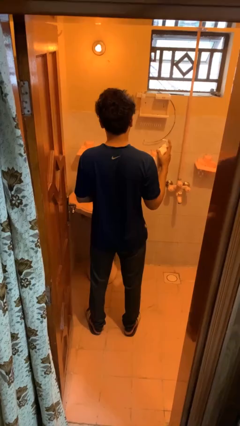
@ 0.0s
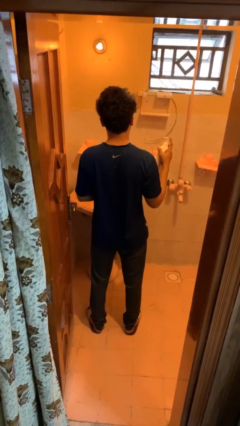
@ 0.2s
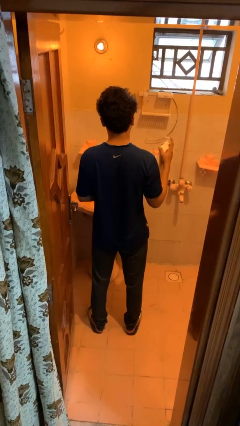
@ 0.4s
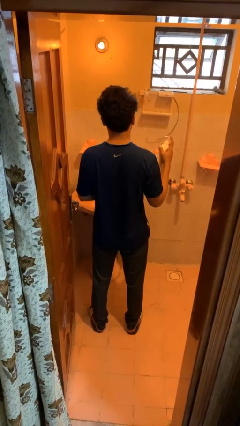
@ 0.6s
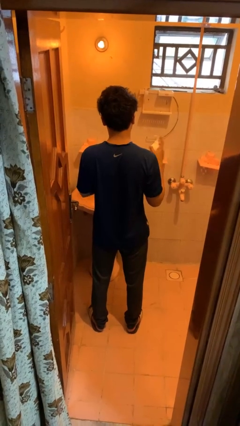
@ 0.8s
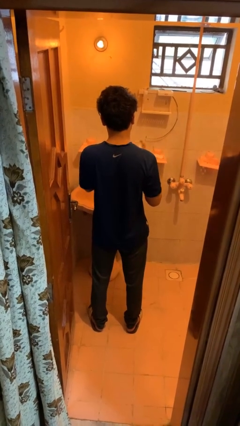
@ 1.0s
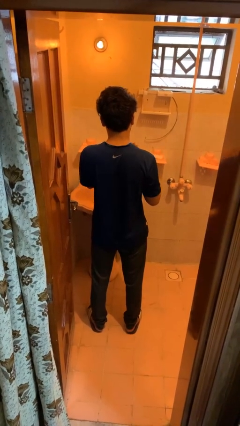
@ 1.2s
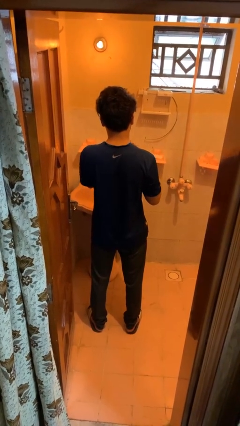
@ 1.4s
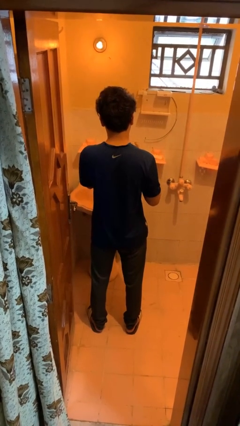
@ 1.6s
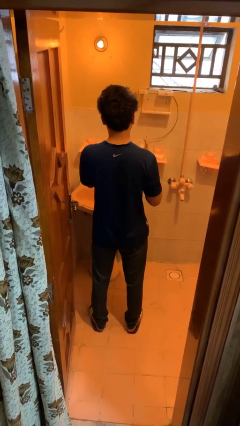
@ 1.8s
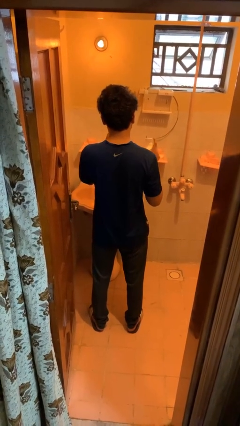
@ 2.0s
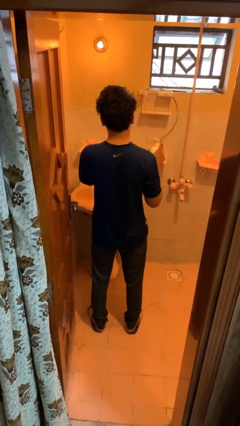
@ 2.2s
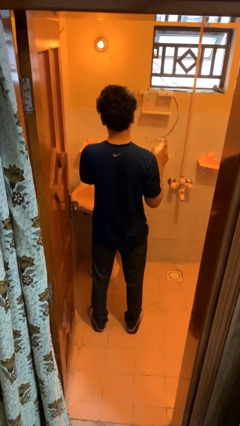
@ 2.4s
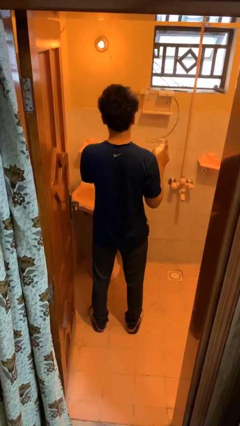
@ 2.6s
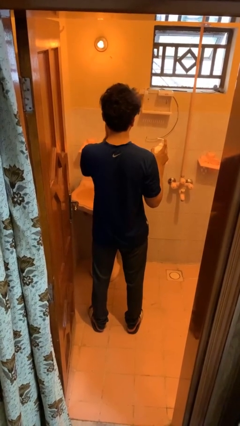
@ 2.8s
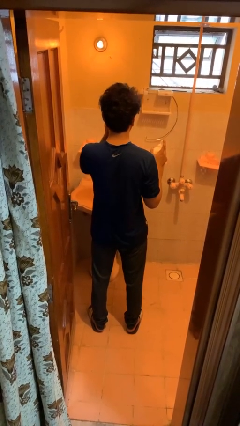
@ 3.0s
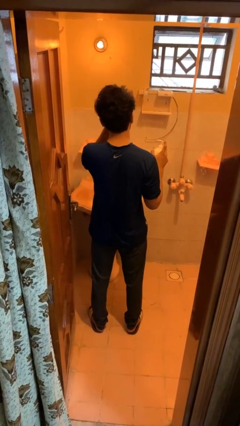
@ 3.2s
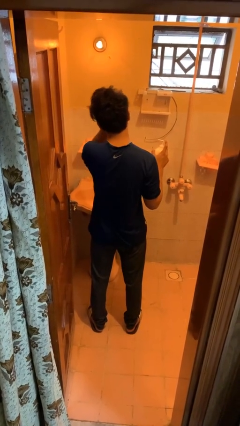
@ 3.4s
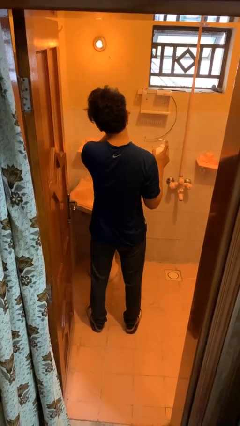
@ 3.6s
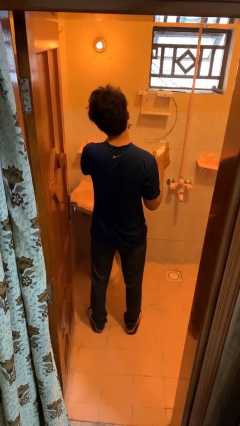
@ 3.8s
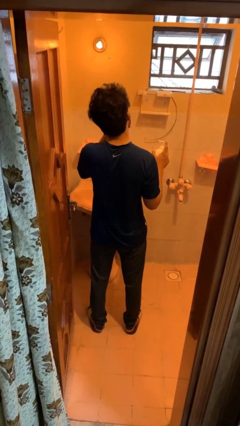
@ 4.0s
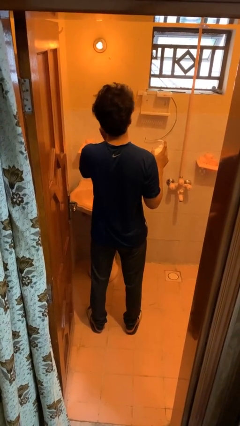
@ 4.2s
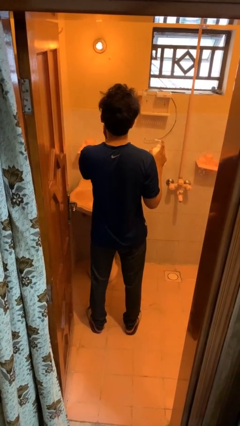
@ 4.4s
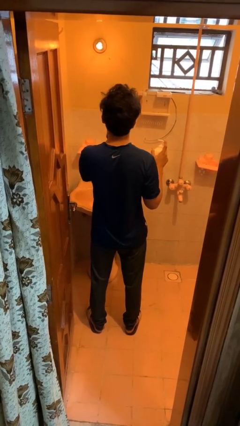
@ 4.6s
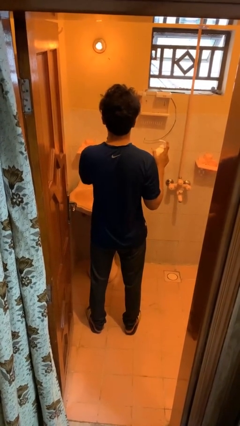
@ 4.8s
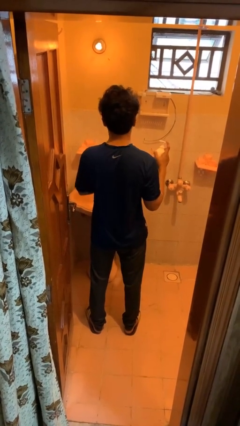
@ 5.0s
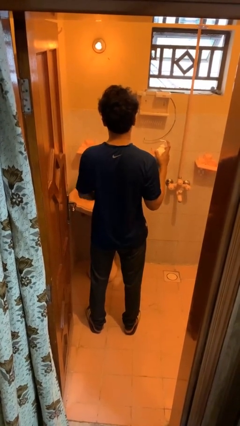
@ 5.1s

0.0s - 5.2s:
person applies facial moisturizer

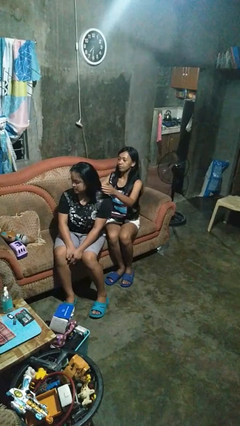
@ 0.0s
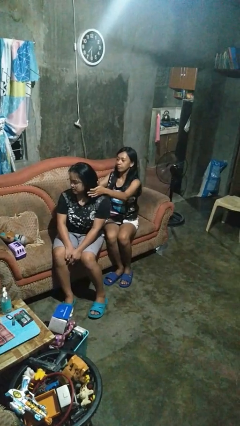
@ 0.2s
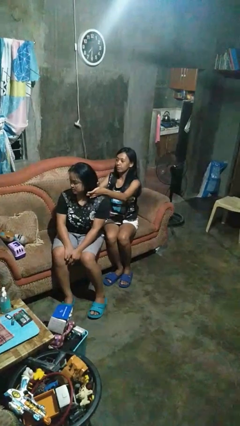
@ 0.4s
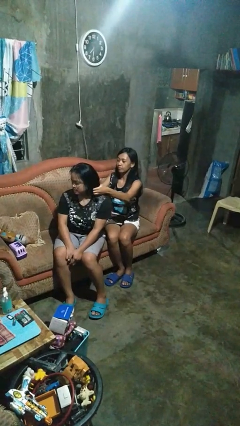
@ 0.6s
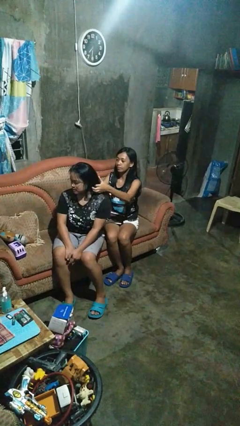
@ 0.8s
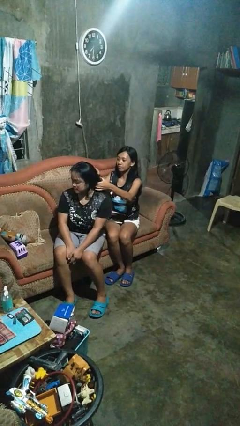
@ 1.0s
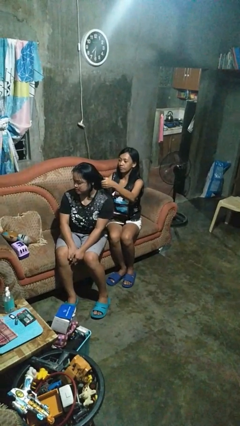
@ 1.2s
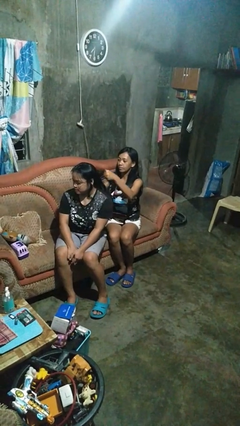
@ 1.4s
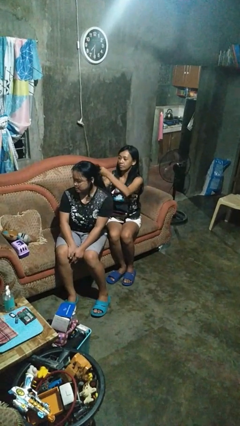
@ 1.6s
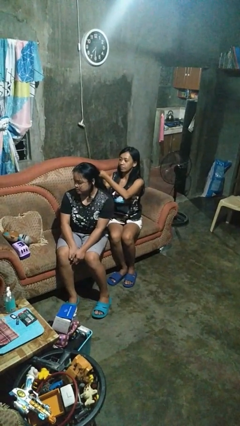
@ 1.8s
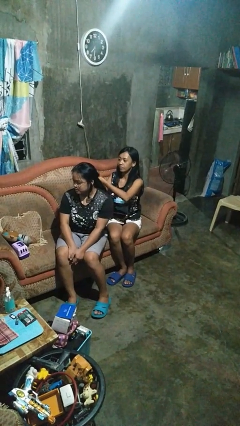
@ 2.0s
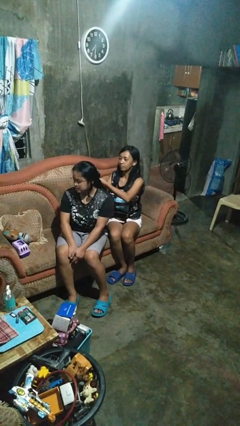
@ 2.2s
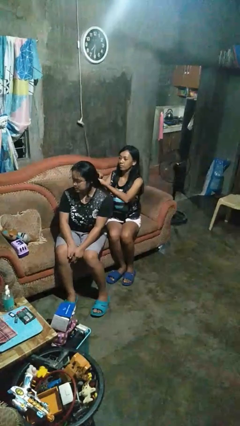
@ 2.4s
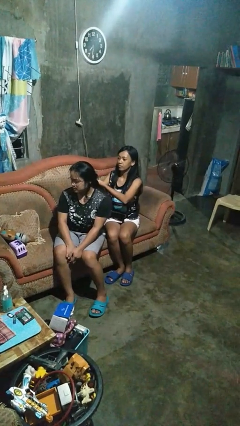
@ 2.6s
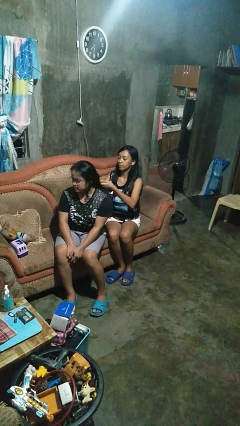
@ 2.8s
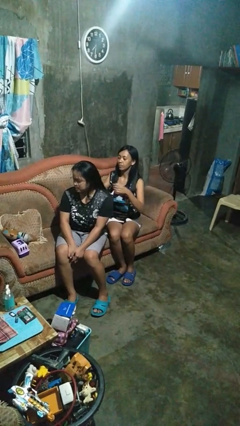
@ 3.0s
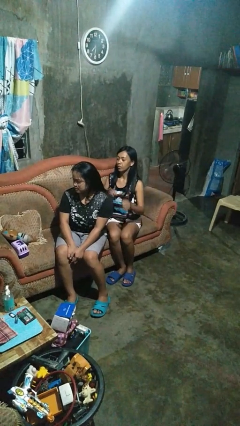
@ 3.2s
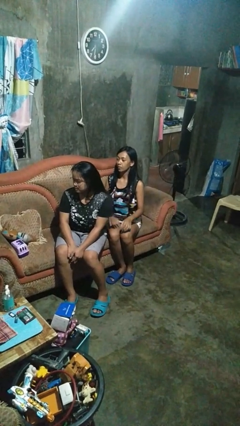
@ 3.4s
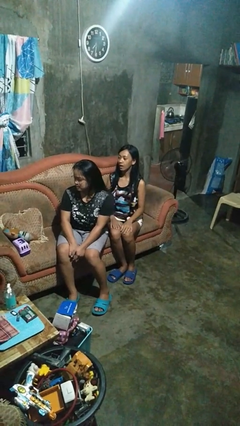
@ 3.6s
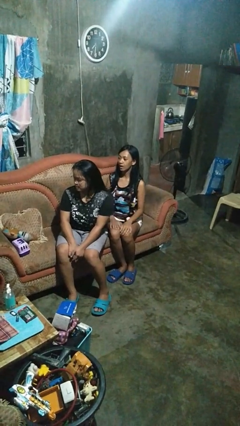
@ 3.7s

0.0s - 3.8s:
person braids hair of person

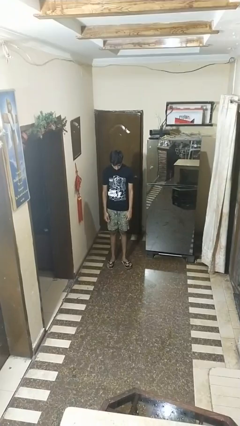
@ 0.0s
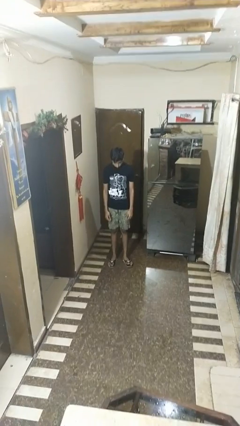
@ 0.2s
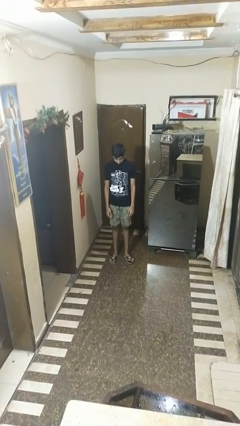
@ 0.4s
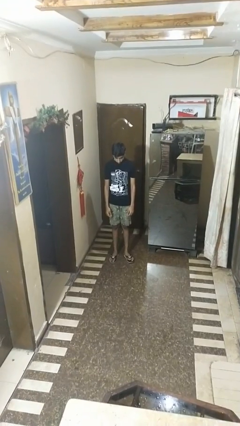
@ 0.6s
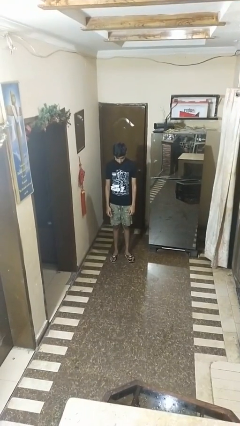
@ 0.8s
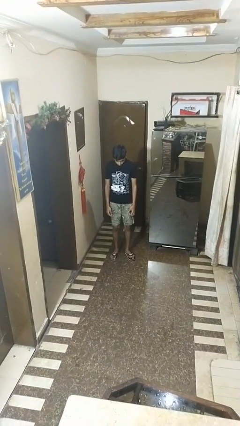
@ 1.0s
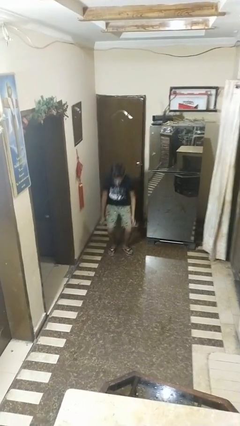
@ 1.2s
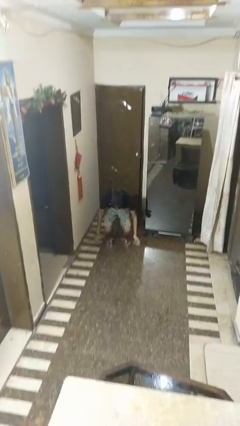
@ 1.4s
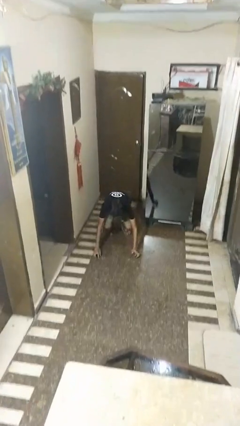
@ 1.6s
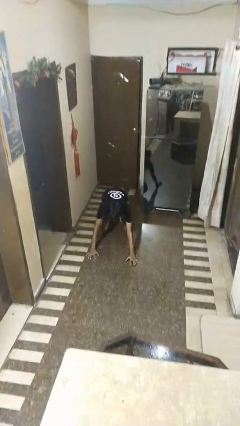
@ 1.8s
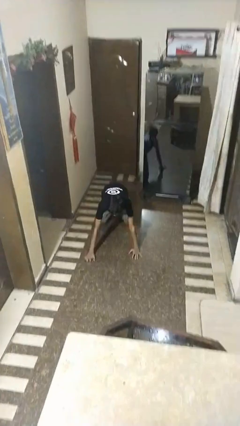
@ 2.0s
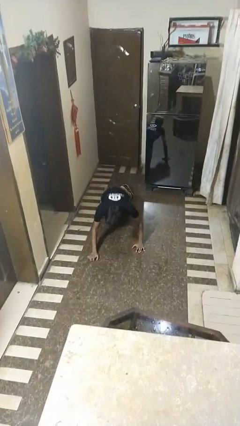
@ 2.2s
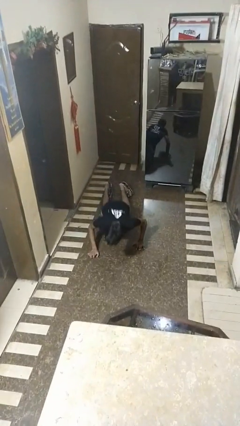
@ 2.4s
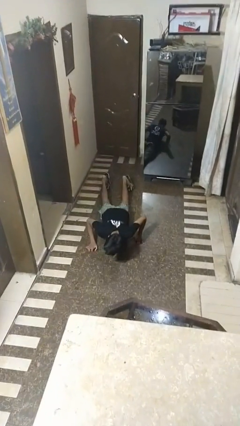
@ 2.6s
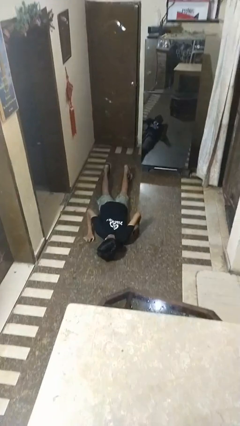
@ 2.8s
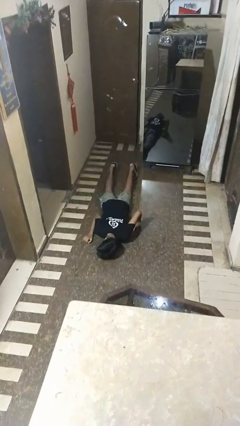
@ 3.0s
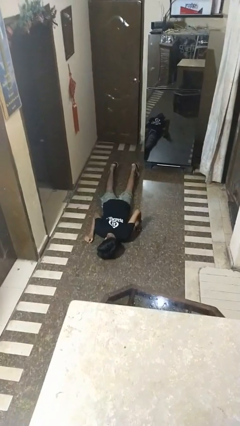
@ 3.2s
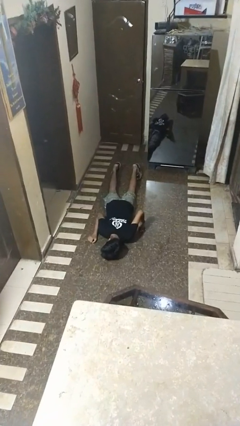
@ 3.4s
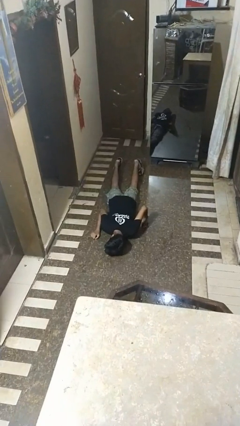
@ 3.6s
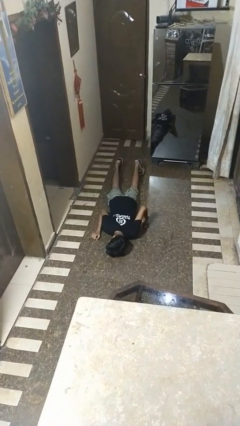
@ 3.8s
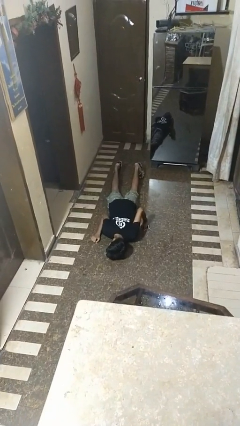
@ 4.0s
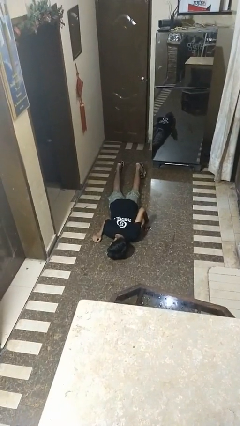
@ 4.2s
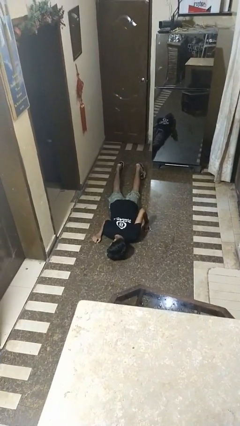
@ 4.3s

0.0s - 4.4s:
person falls while standing

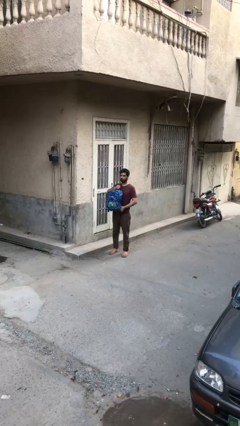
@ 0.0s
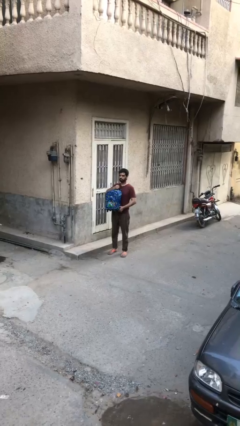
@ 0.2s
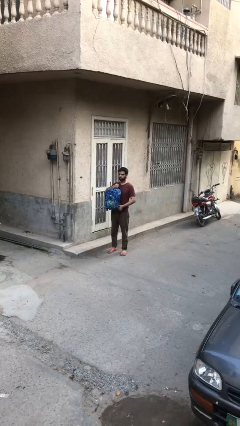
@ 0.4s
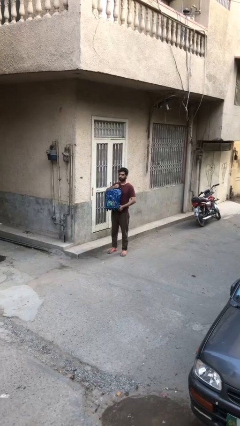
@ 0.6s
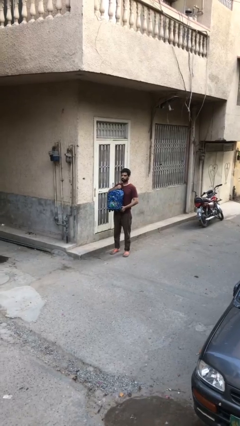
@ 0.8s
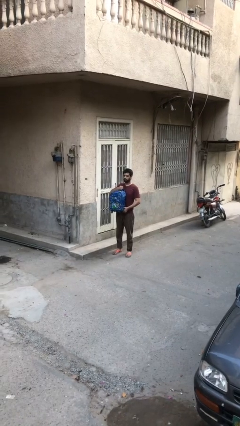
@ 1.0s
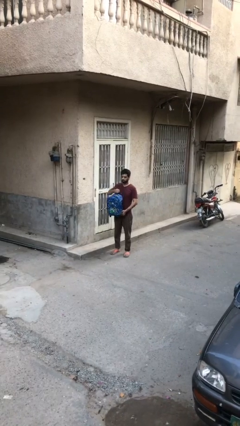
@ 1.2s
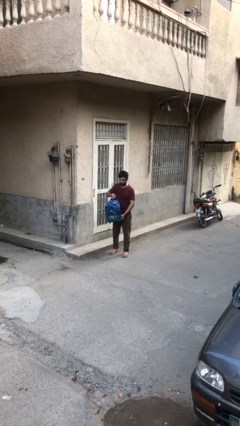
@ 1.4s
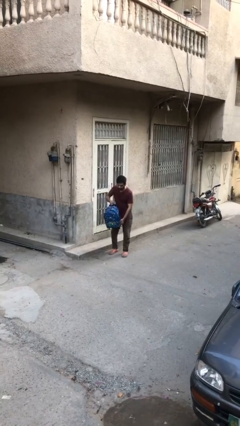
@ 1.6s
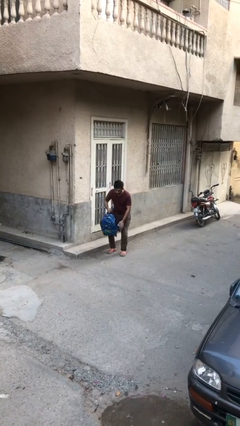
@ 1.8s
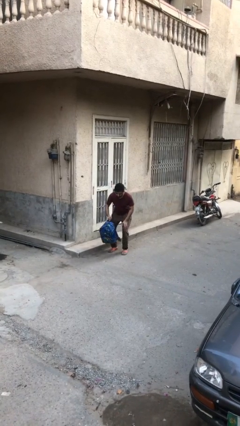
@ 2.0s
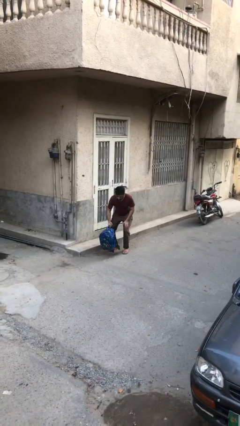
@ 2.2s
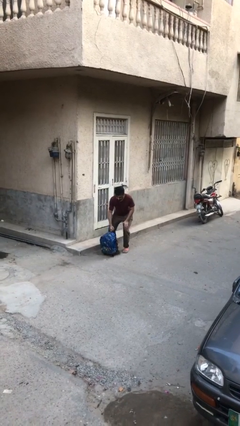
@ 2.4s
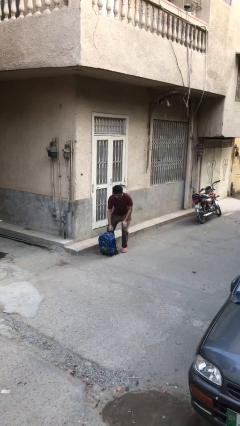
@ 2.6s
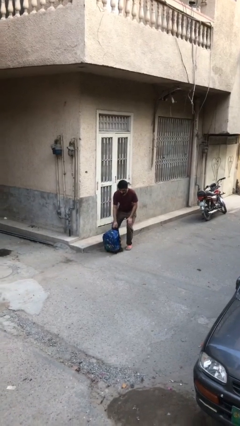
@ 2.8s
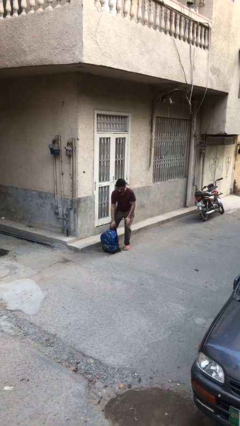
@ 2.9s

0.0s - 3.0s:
person puts down object on floor

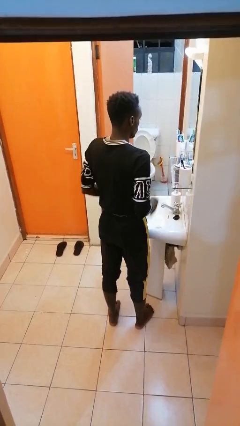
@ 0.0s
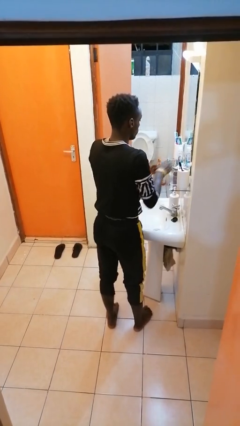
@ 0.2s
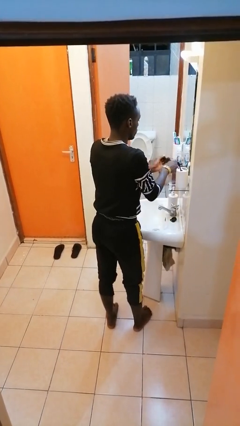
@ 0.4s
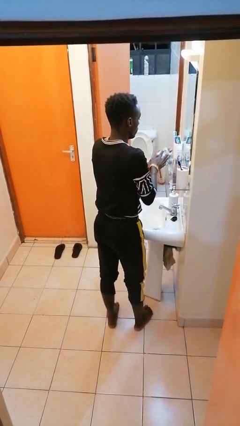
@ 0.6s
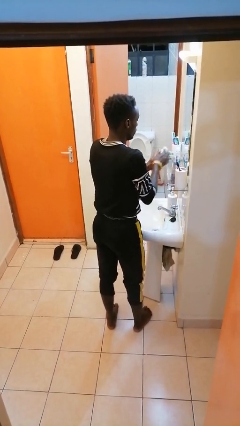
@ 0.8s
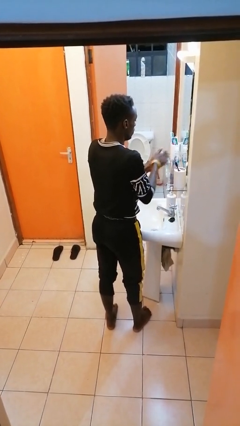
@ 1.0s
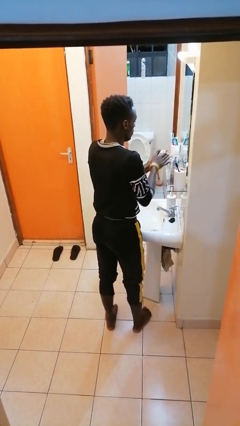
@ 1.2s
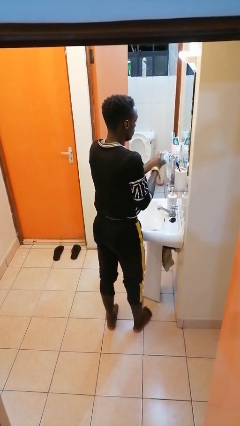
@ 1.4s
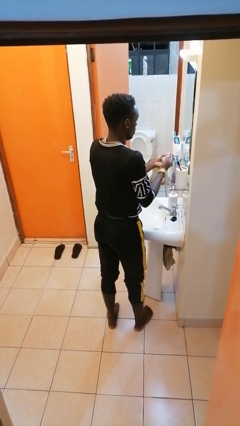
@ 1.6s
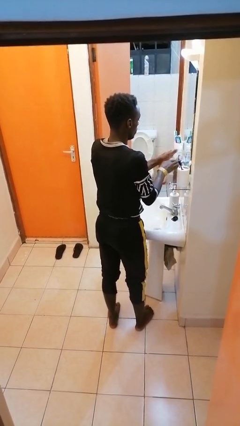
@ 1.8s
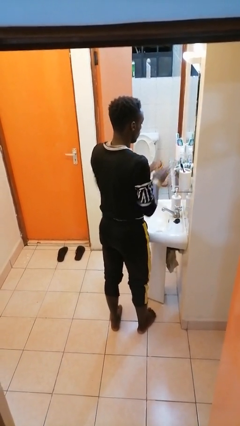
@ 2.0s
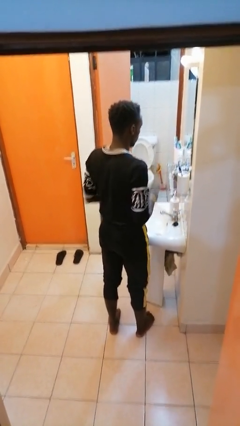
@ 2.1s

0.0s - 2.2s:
person dries hands with towel
